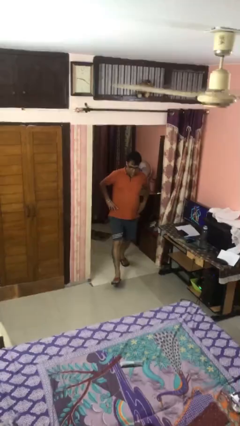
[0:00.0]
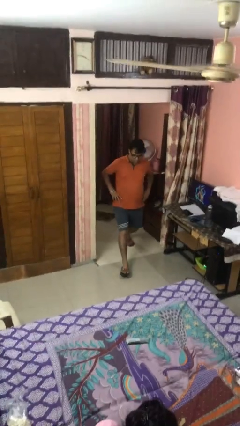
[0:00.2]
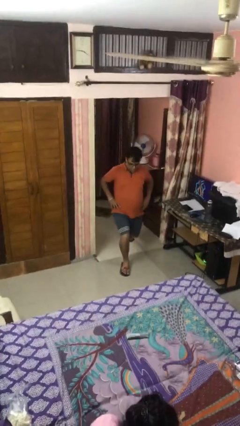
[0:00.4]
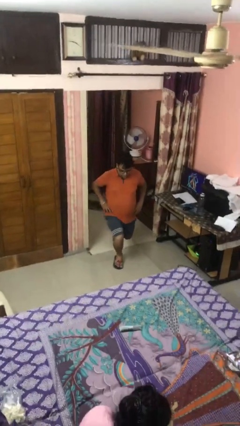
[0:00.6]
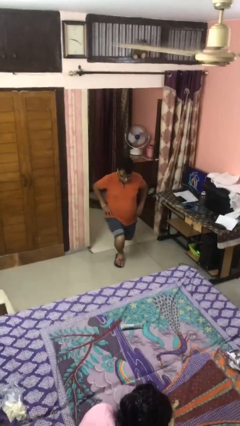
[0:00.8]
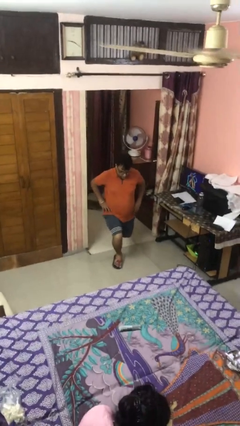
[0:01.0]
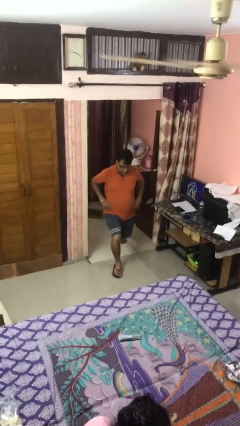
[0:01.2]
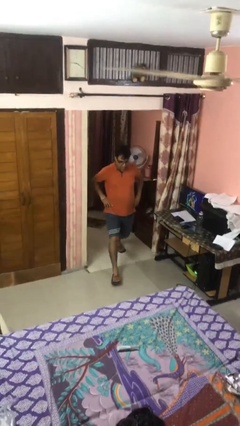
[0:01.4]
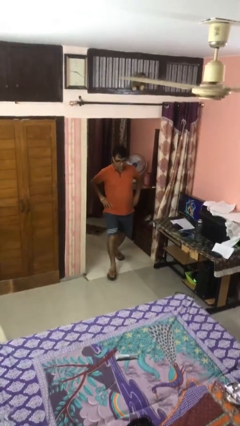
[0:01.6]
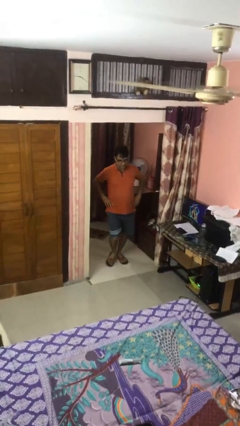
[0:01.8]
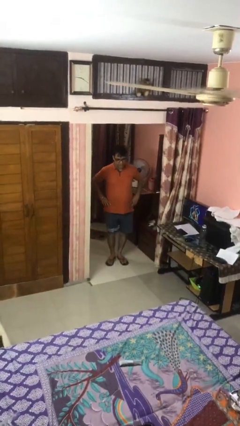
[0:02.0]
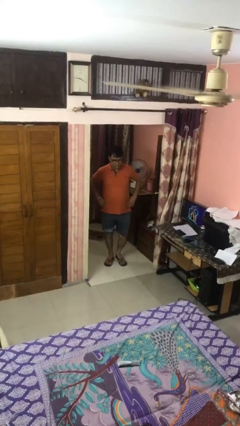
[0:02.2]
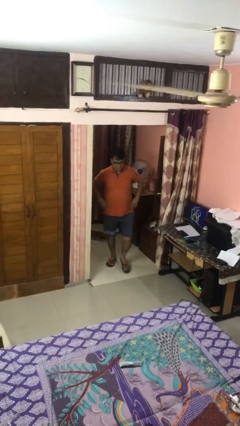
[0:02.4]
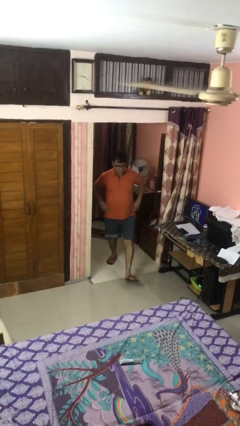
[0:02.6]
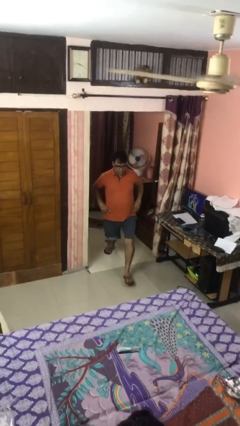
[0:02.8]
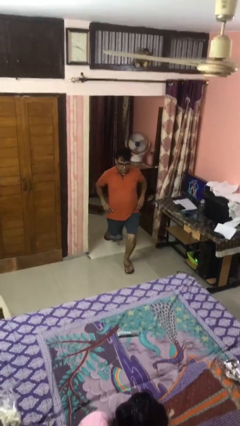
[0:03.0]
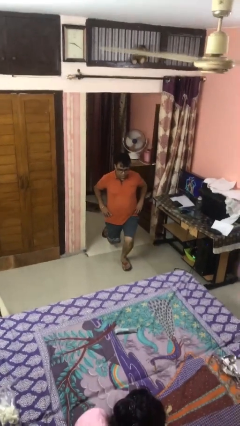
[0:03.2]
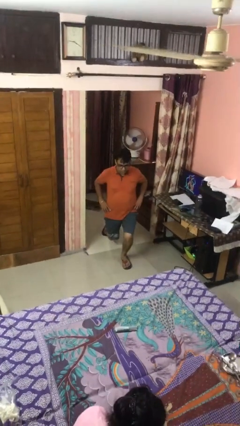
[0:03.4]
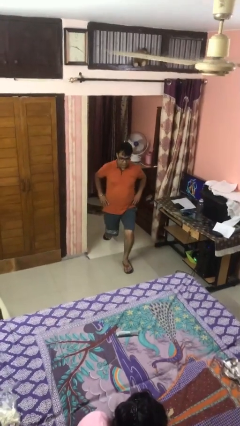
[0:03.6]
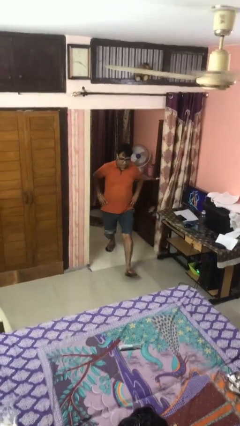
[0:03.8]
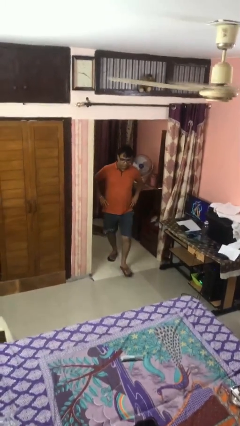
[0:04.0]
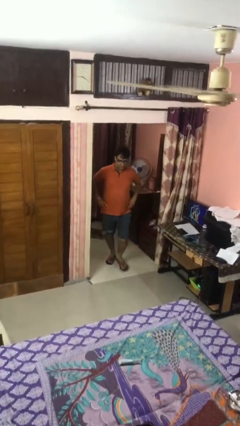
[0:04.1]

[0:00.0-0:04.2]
person exercises with lunges

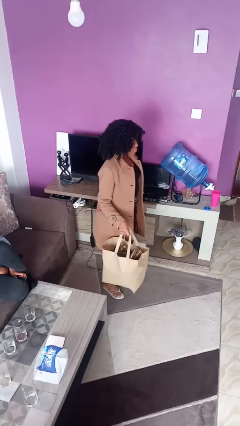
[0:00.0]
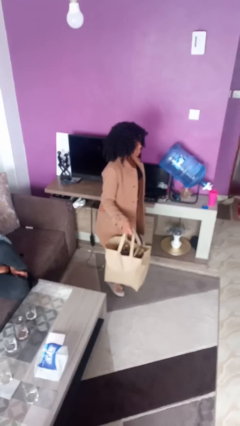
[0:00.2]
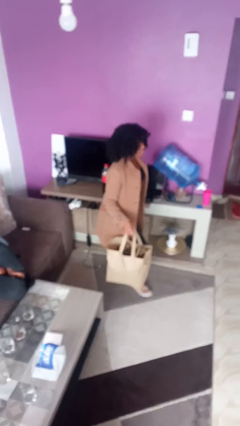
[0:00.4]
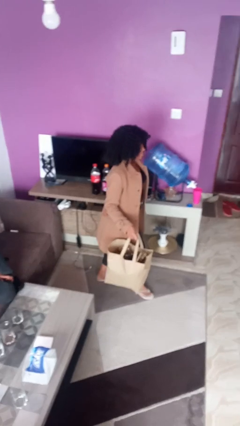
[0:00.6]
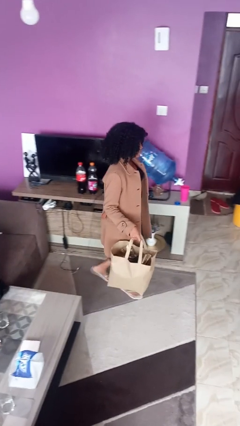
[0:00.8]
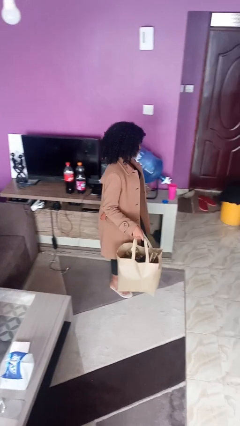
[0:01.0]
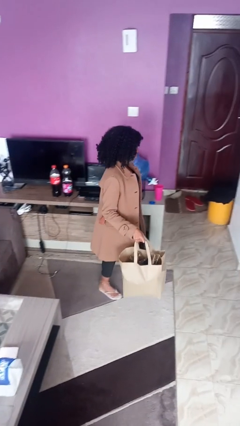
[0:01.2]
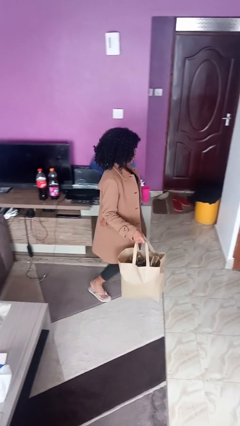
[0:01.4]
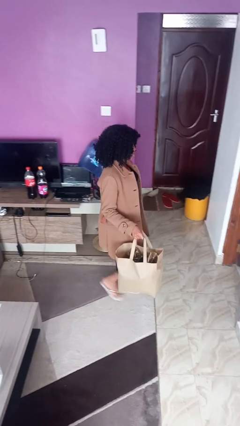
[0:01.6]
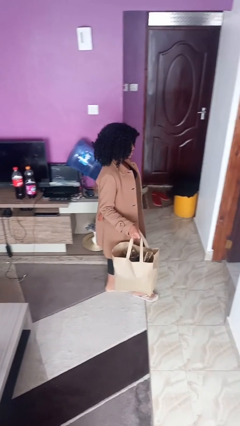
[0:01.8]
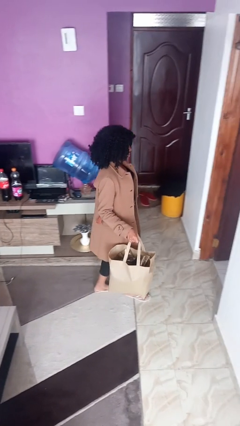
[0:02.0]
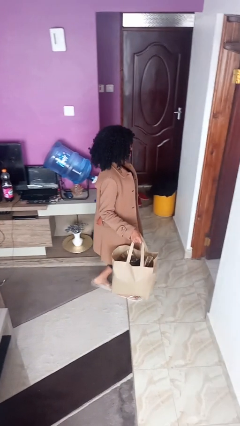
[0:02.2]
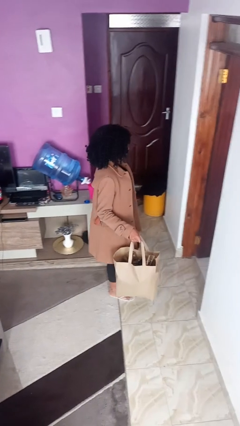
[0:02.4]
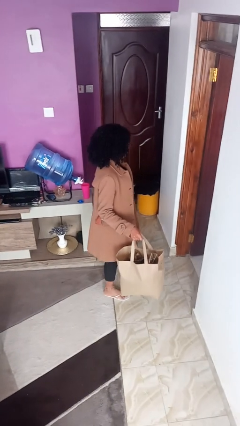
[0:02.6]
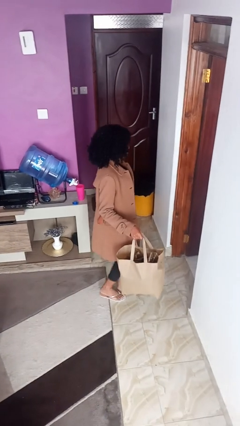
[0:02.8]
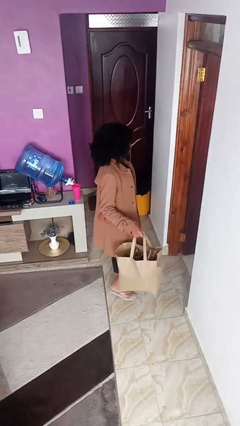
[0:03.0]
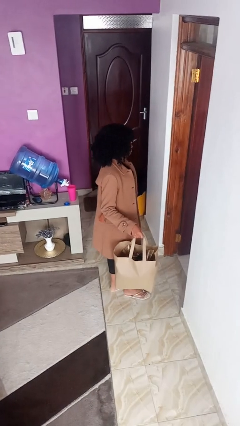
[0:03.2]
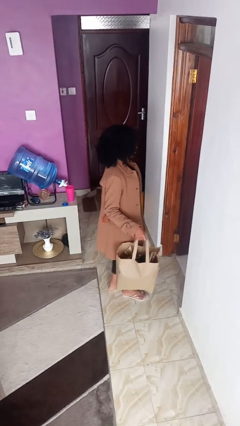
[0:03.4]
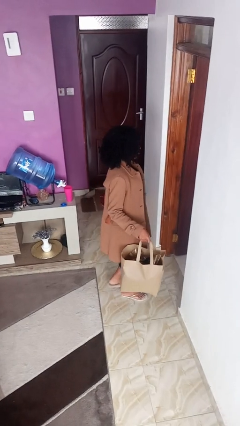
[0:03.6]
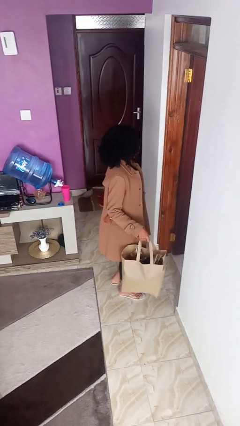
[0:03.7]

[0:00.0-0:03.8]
person carries groceries

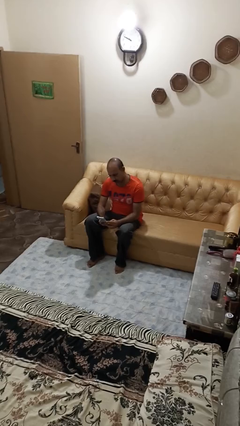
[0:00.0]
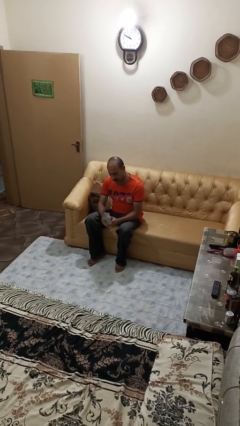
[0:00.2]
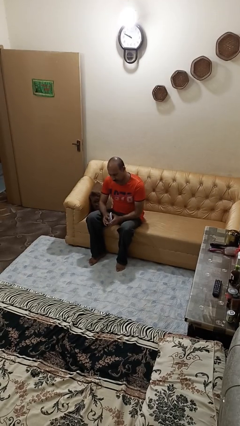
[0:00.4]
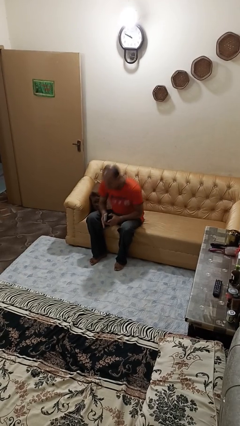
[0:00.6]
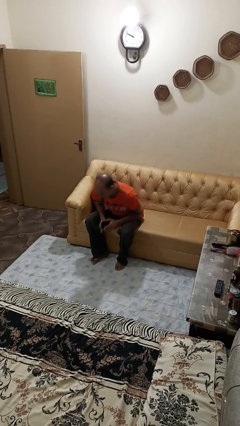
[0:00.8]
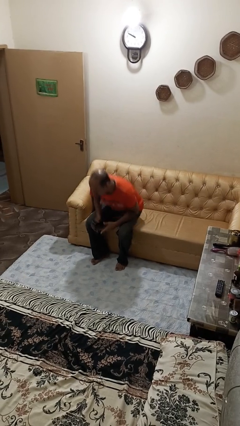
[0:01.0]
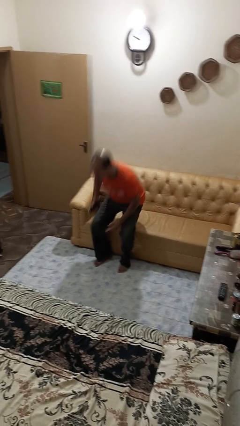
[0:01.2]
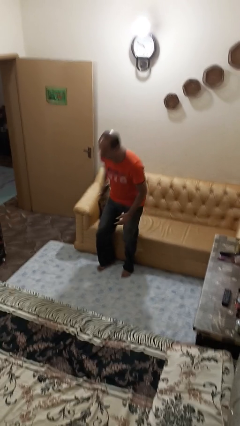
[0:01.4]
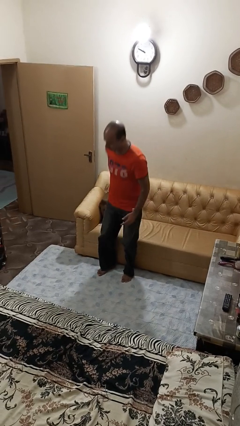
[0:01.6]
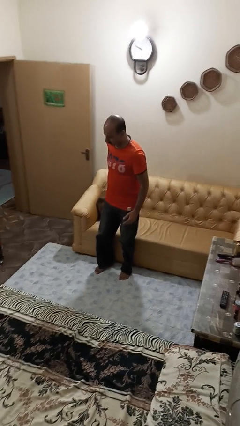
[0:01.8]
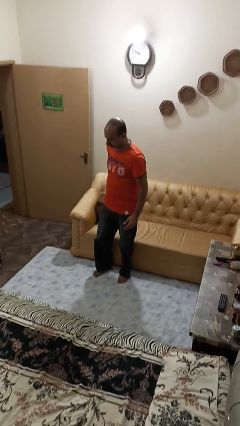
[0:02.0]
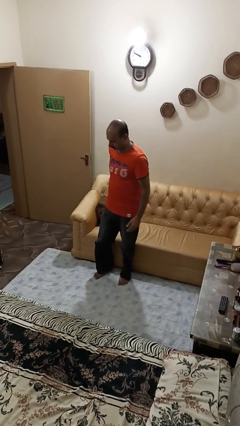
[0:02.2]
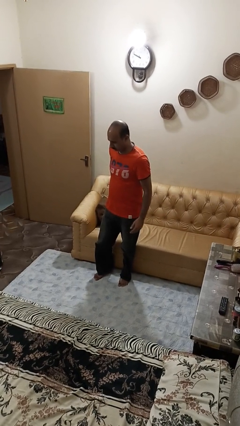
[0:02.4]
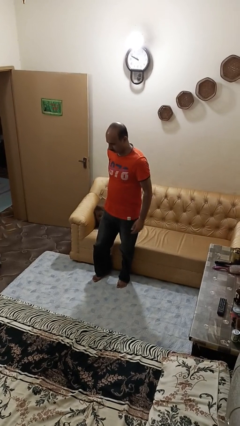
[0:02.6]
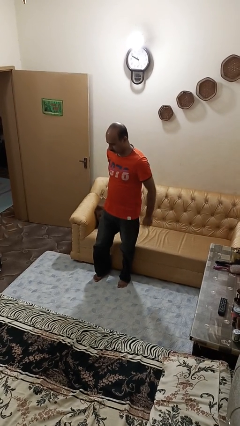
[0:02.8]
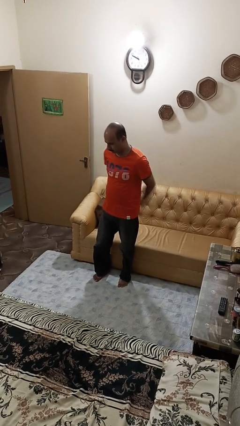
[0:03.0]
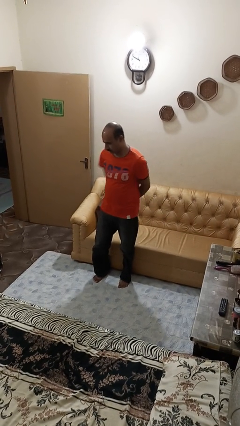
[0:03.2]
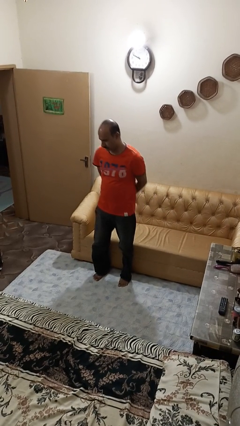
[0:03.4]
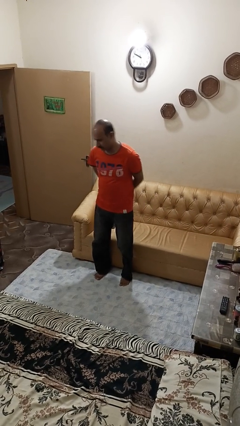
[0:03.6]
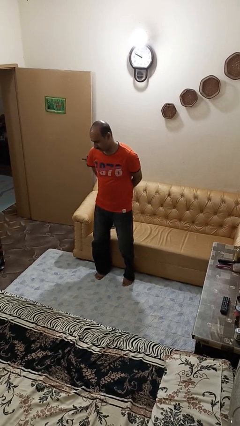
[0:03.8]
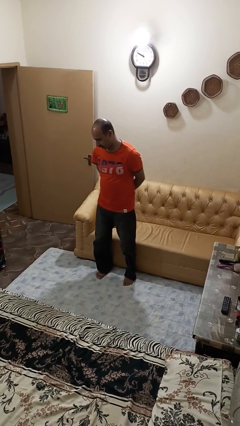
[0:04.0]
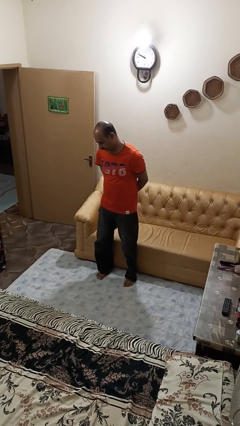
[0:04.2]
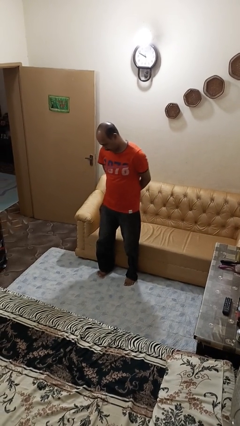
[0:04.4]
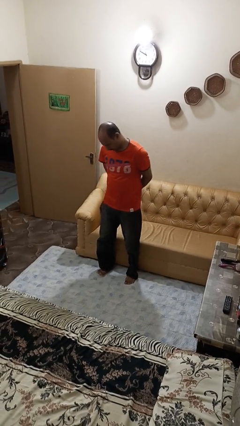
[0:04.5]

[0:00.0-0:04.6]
person puts phone into pocket

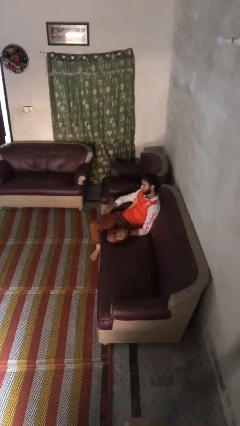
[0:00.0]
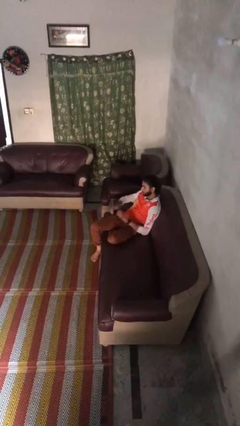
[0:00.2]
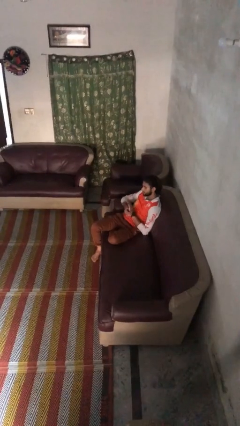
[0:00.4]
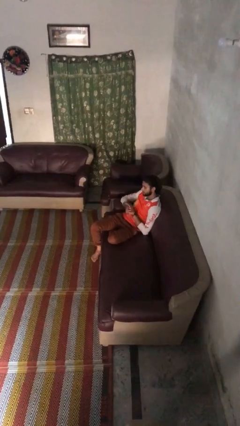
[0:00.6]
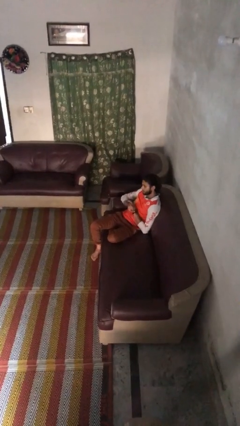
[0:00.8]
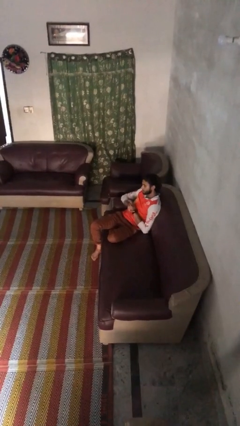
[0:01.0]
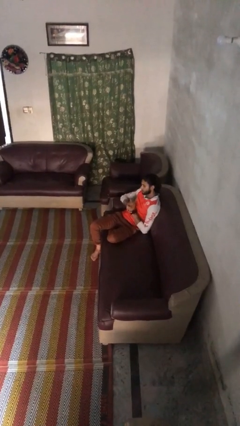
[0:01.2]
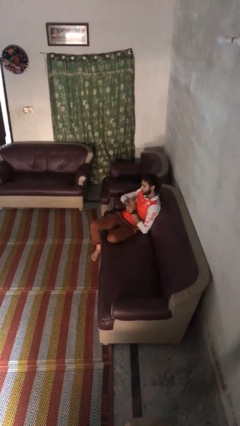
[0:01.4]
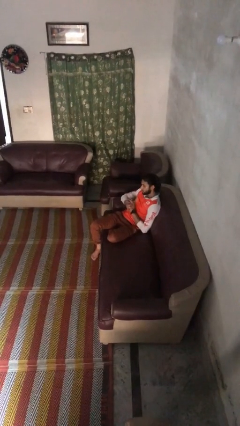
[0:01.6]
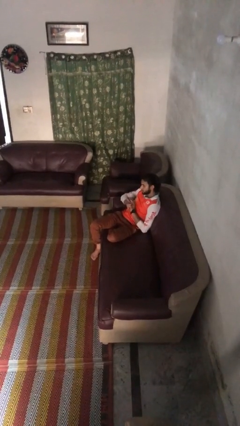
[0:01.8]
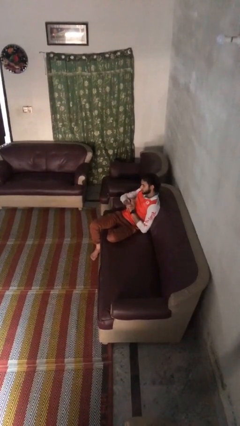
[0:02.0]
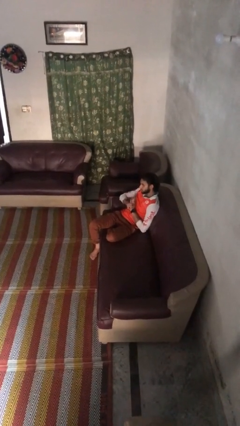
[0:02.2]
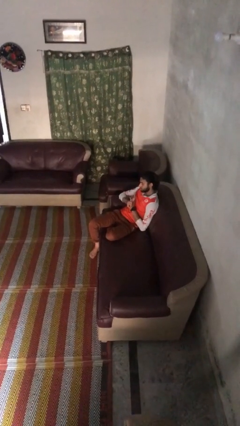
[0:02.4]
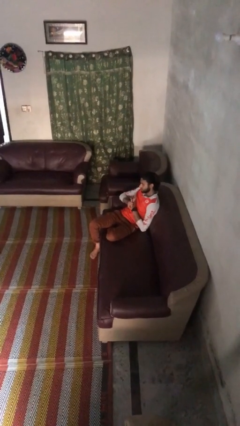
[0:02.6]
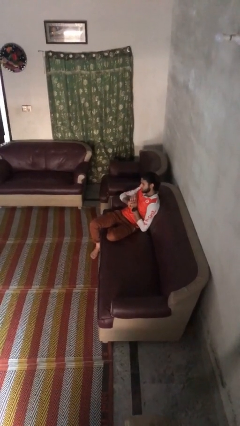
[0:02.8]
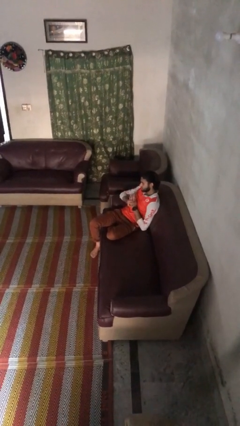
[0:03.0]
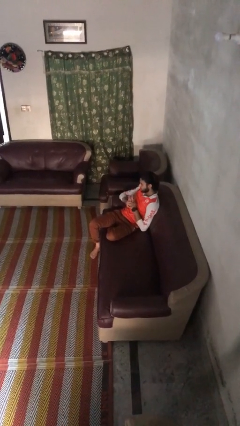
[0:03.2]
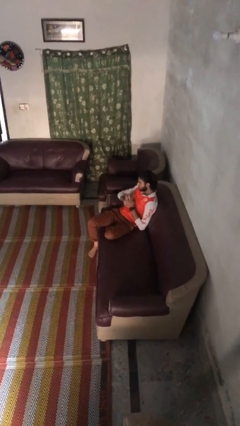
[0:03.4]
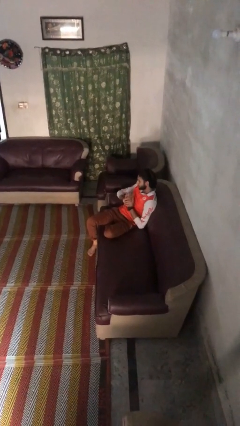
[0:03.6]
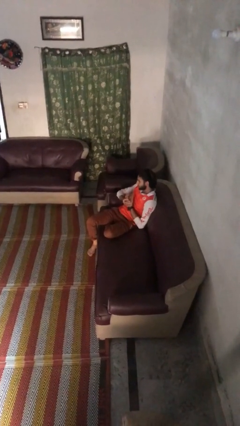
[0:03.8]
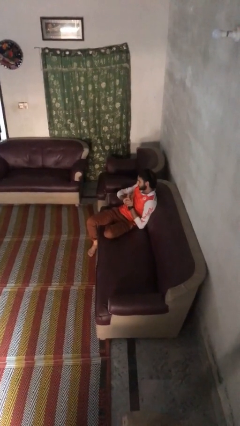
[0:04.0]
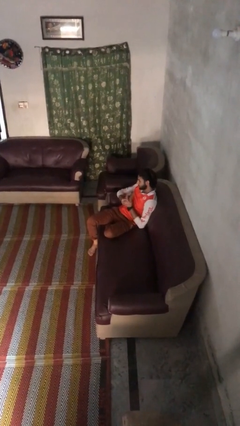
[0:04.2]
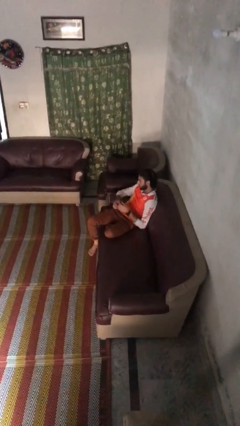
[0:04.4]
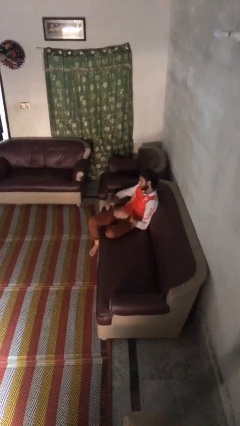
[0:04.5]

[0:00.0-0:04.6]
person cracks knuckles

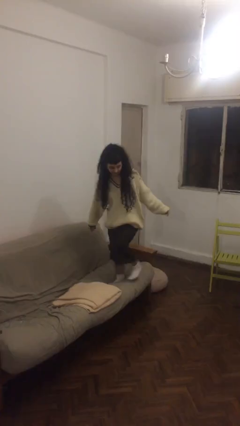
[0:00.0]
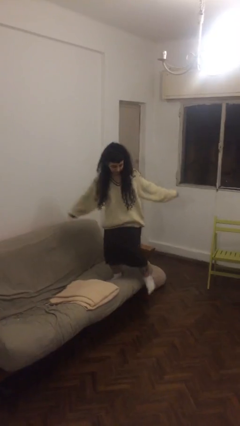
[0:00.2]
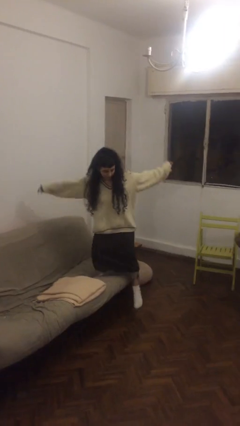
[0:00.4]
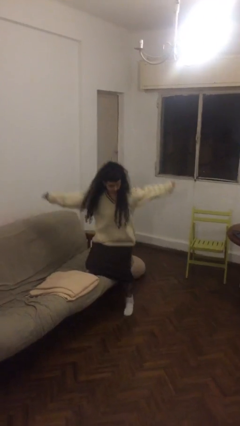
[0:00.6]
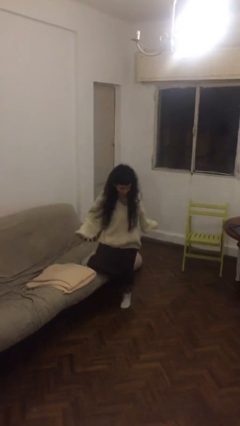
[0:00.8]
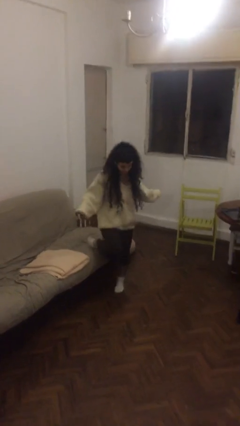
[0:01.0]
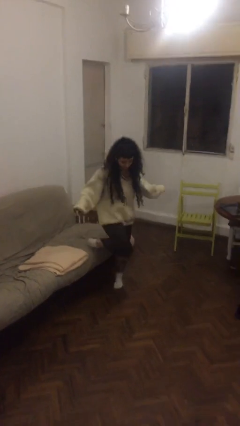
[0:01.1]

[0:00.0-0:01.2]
person climbs off couch
